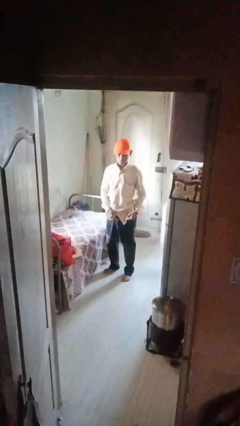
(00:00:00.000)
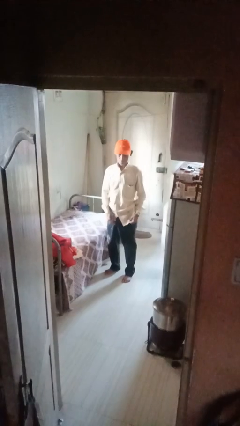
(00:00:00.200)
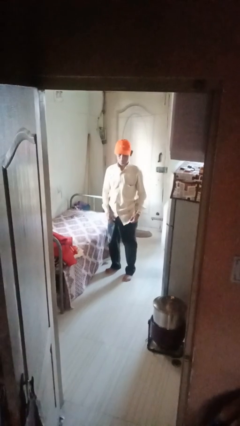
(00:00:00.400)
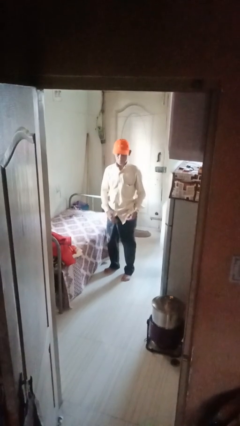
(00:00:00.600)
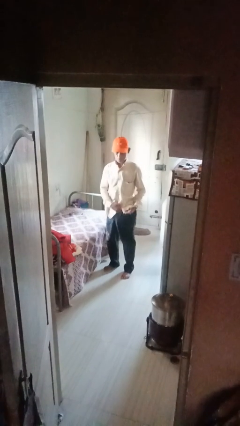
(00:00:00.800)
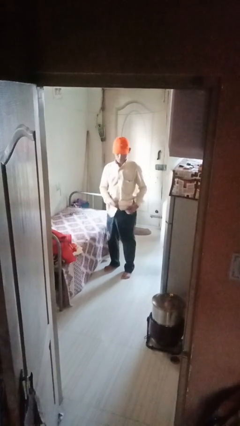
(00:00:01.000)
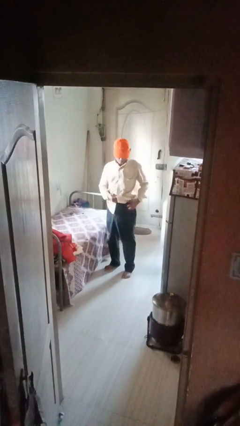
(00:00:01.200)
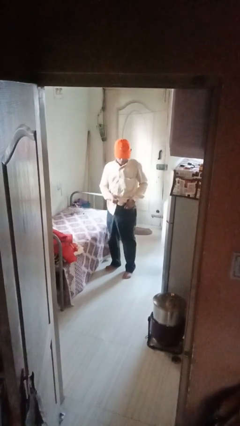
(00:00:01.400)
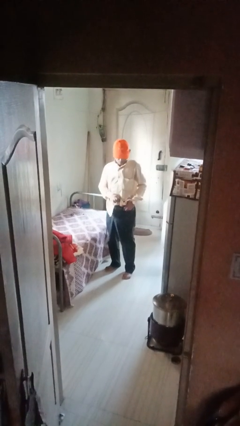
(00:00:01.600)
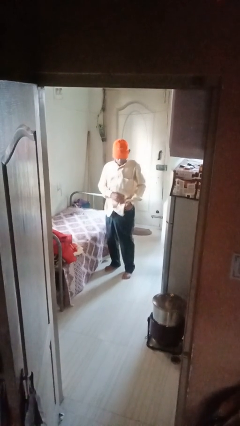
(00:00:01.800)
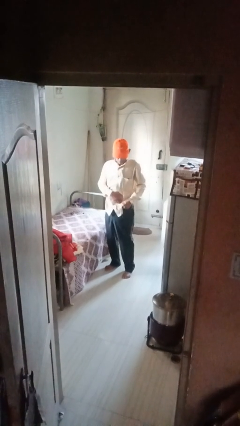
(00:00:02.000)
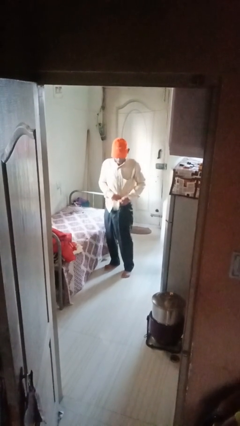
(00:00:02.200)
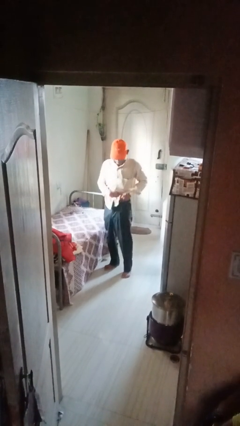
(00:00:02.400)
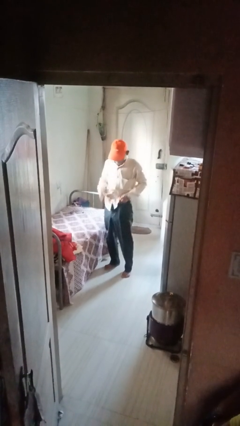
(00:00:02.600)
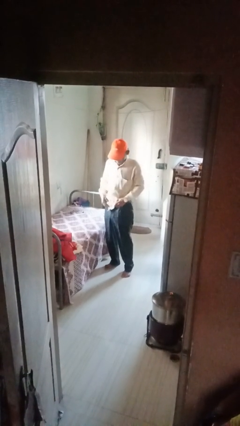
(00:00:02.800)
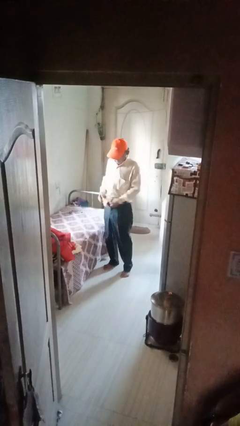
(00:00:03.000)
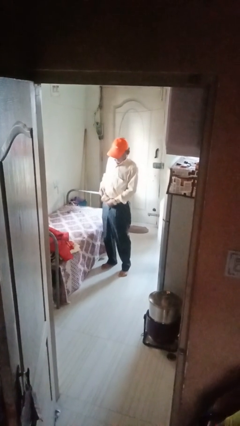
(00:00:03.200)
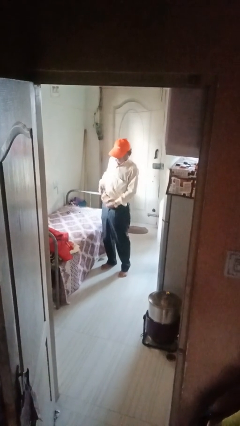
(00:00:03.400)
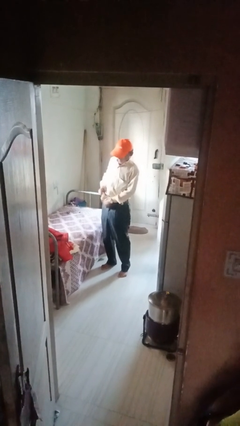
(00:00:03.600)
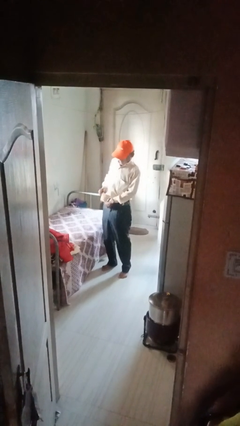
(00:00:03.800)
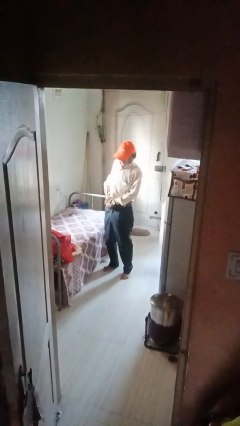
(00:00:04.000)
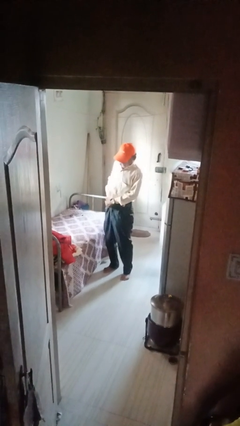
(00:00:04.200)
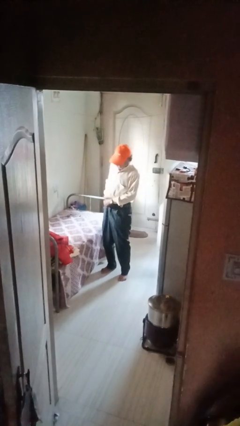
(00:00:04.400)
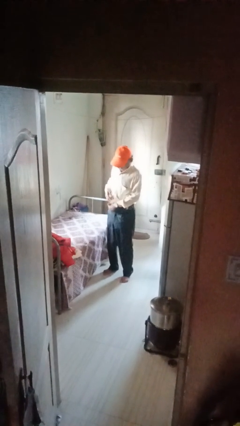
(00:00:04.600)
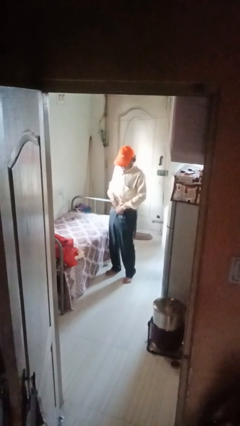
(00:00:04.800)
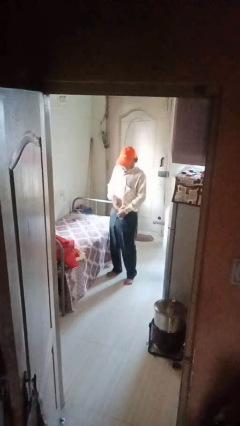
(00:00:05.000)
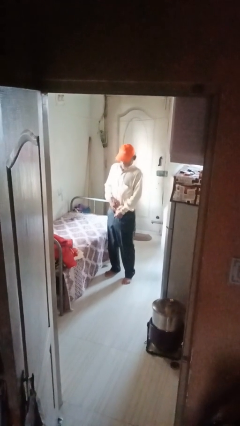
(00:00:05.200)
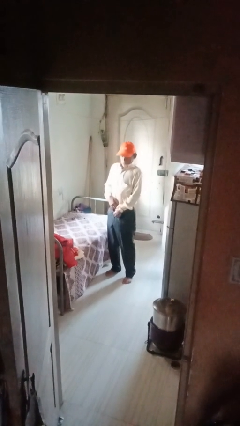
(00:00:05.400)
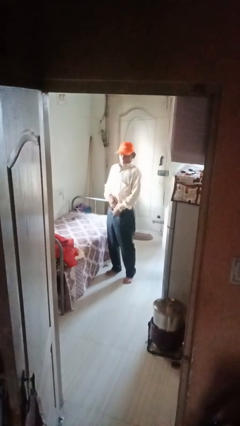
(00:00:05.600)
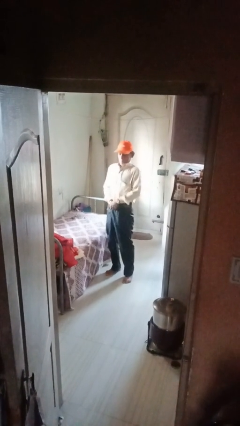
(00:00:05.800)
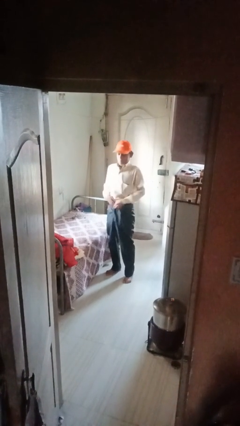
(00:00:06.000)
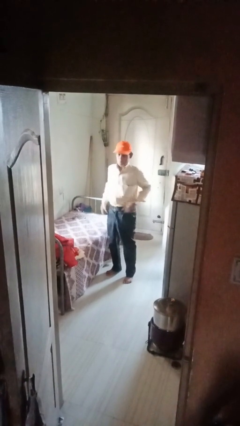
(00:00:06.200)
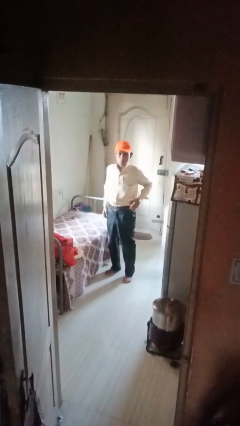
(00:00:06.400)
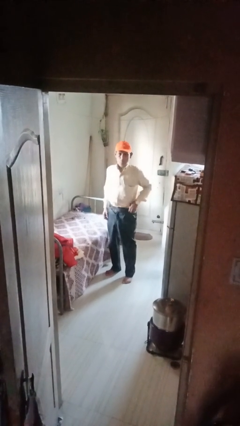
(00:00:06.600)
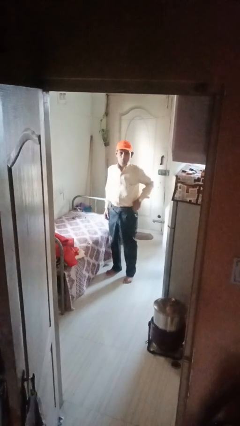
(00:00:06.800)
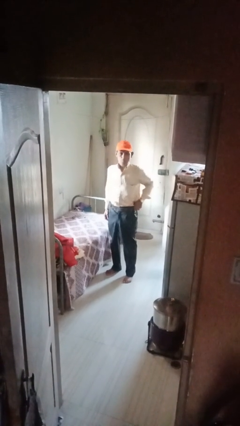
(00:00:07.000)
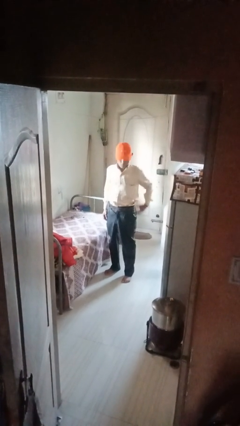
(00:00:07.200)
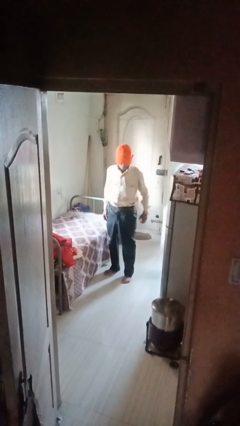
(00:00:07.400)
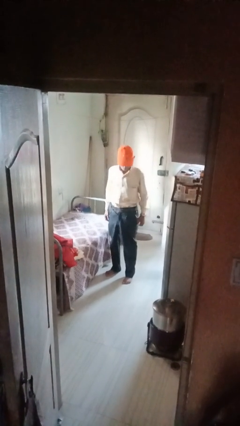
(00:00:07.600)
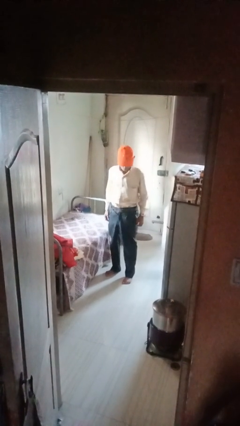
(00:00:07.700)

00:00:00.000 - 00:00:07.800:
person tucks in shirt

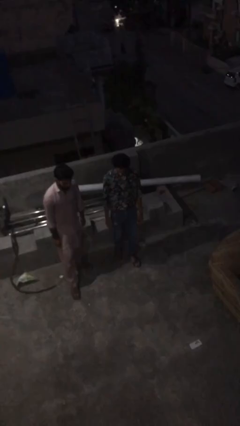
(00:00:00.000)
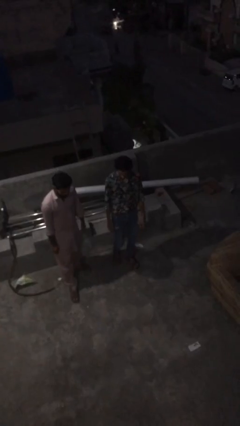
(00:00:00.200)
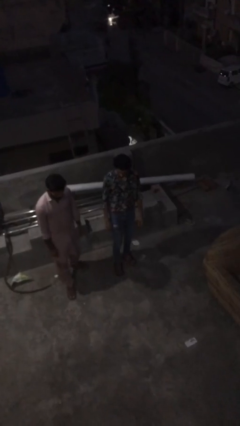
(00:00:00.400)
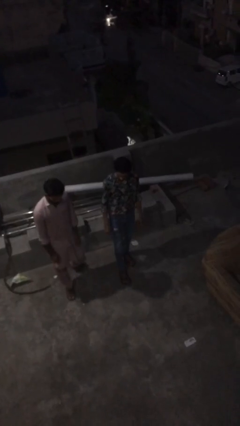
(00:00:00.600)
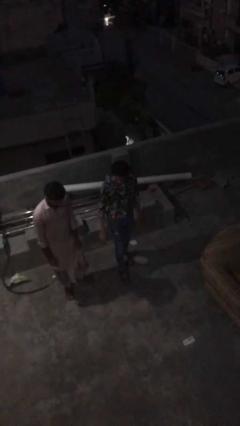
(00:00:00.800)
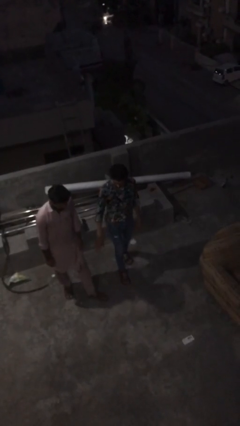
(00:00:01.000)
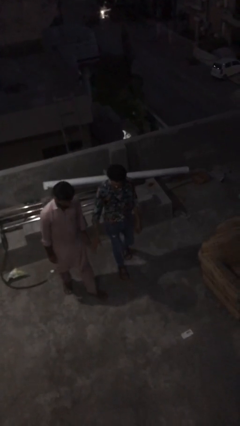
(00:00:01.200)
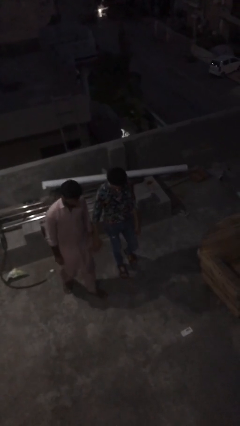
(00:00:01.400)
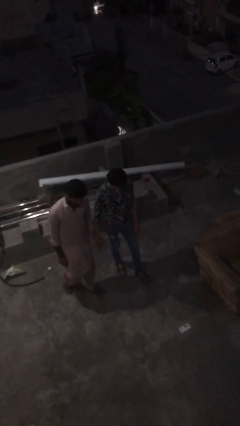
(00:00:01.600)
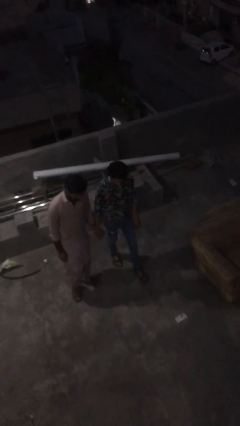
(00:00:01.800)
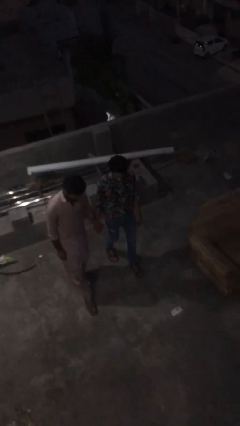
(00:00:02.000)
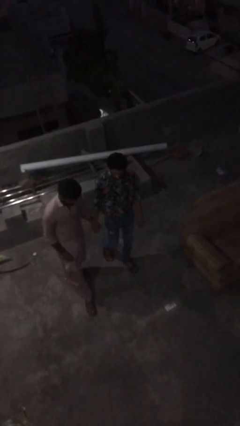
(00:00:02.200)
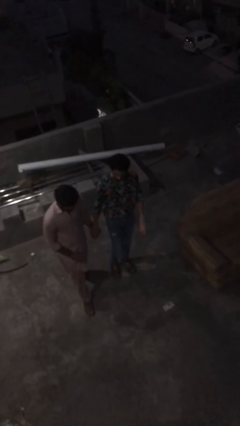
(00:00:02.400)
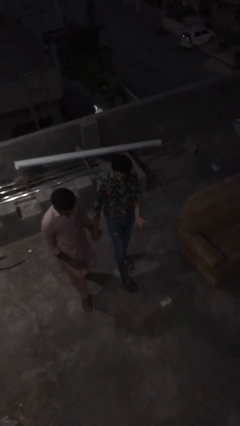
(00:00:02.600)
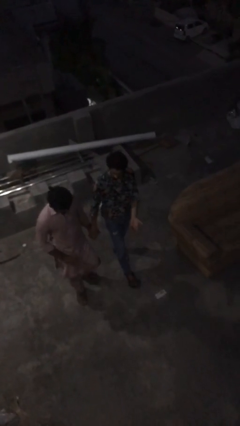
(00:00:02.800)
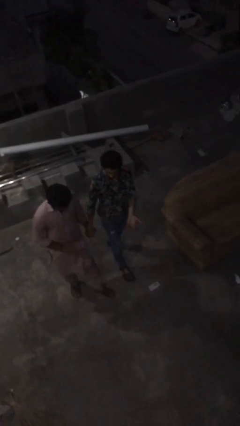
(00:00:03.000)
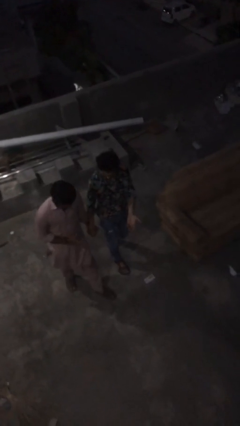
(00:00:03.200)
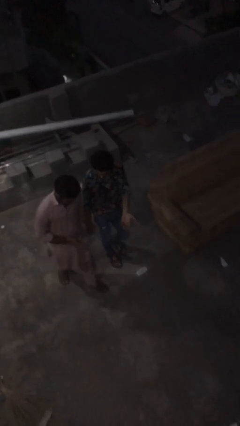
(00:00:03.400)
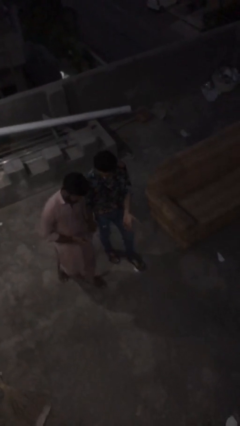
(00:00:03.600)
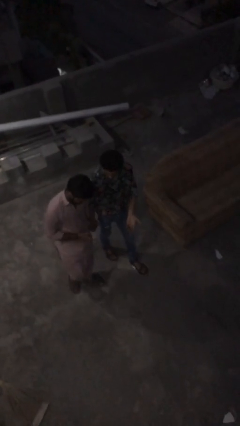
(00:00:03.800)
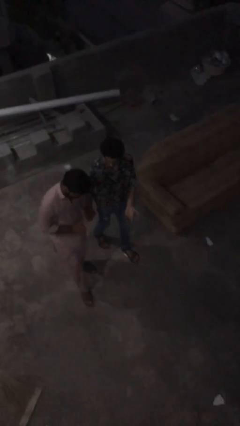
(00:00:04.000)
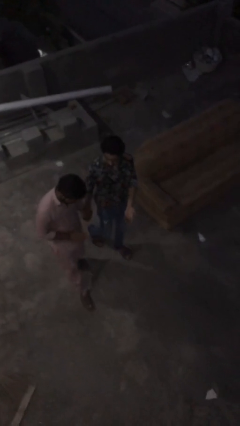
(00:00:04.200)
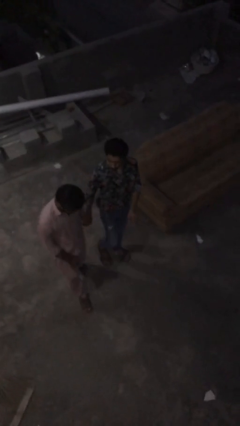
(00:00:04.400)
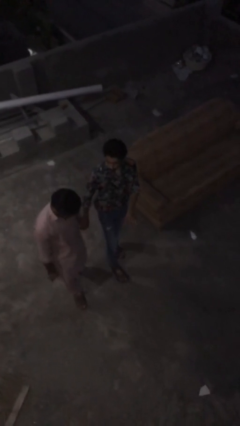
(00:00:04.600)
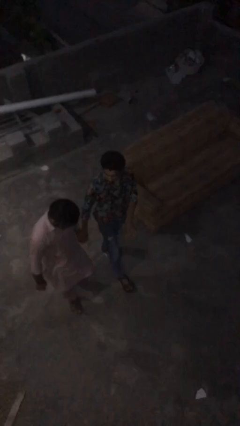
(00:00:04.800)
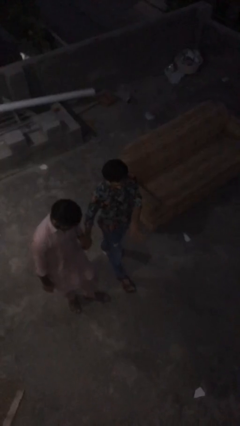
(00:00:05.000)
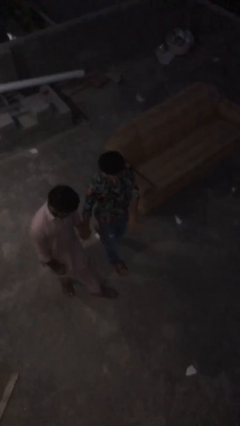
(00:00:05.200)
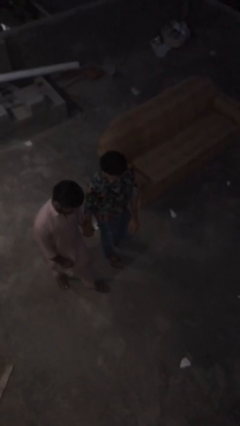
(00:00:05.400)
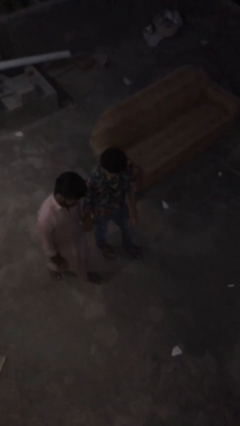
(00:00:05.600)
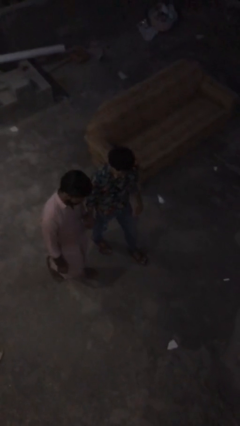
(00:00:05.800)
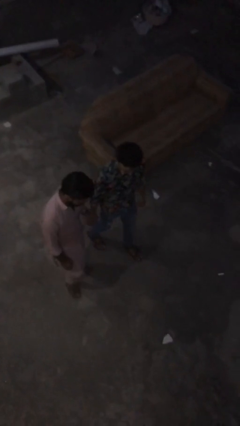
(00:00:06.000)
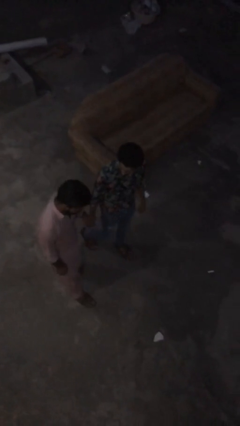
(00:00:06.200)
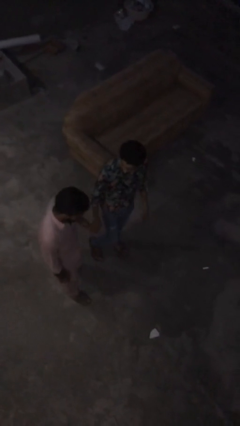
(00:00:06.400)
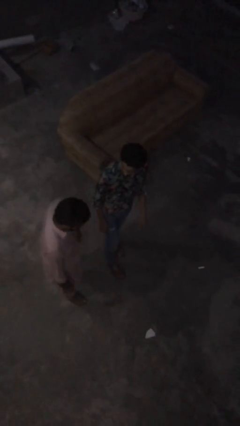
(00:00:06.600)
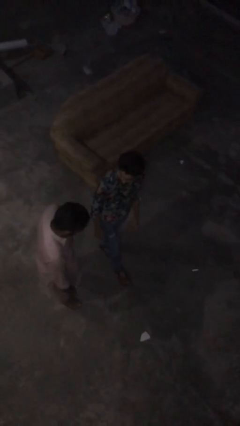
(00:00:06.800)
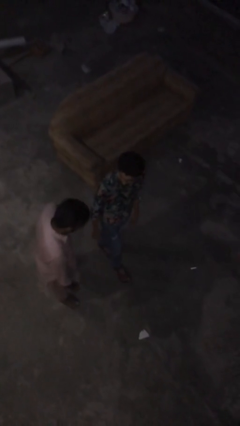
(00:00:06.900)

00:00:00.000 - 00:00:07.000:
person holds hand

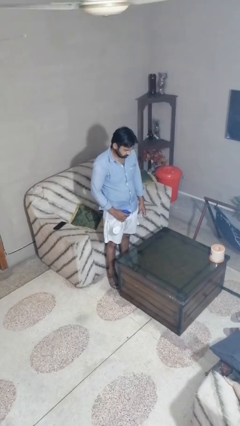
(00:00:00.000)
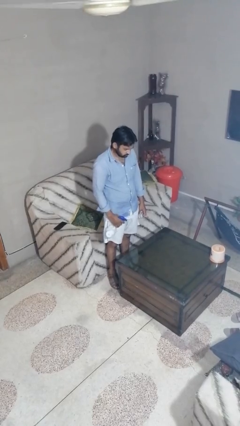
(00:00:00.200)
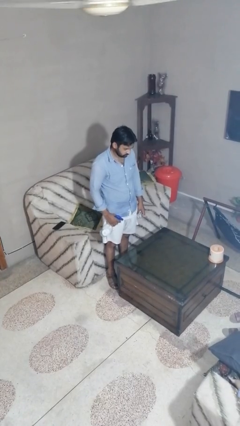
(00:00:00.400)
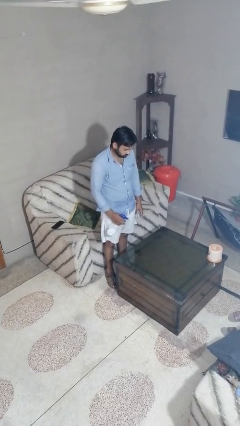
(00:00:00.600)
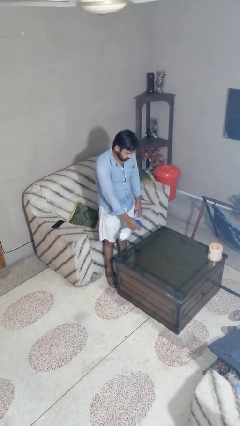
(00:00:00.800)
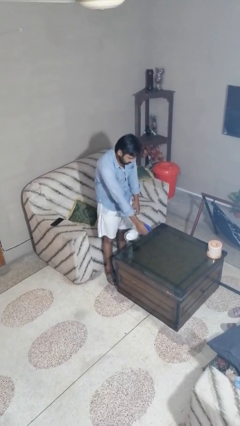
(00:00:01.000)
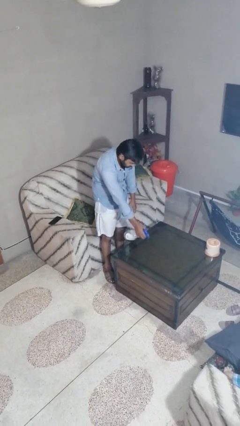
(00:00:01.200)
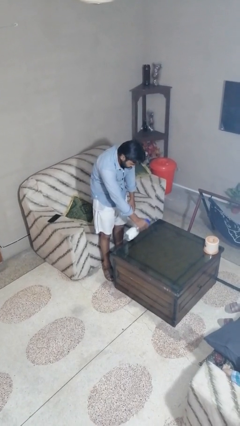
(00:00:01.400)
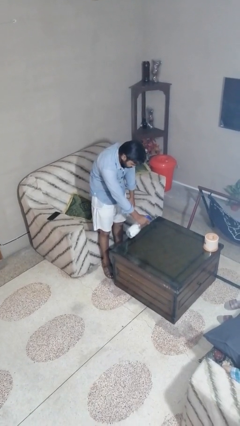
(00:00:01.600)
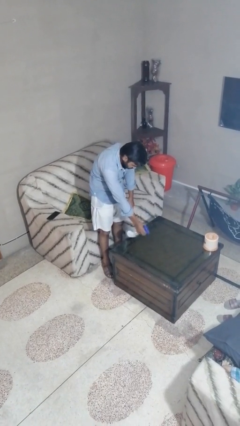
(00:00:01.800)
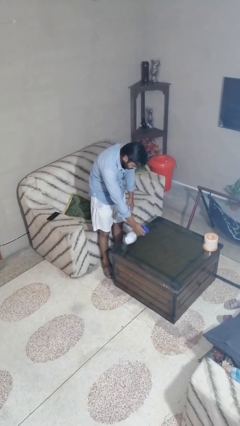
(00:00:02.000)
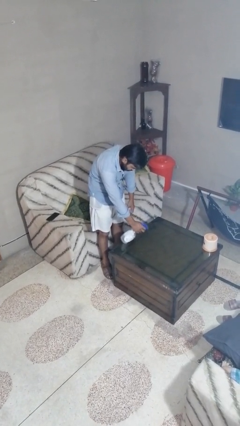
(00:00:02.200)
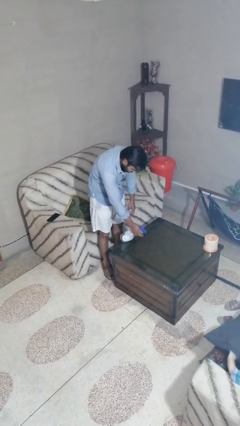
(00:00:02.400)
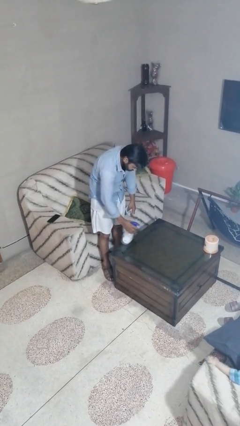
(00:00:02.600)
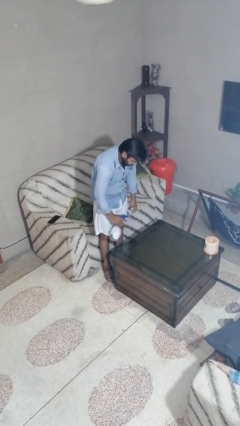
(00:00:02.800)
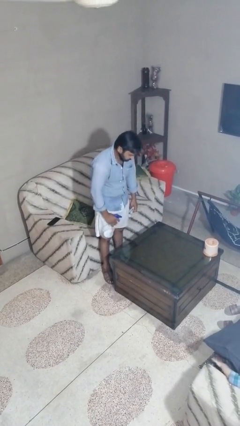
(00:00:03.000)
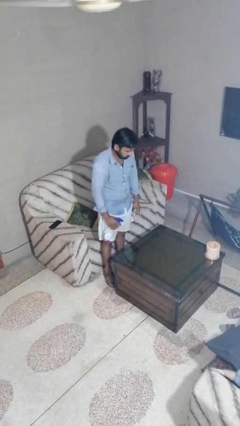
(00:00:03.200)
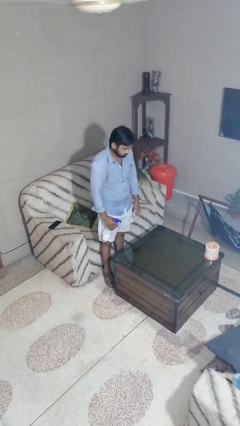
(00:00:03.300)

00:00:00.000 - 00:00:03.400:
person sprays from bottle
